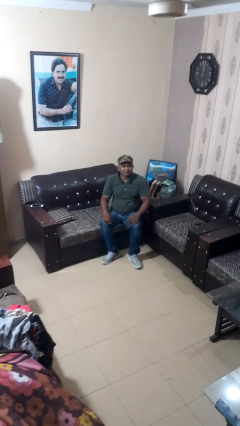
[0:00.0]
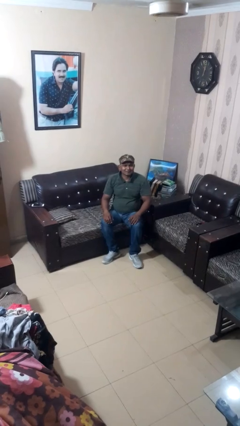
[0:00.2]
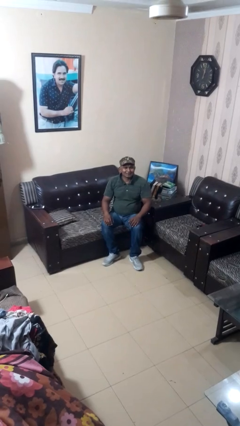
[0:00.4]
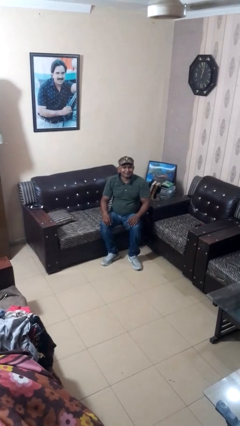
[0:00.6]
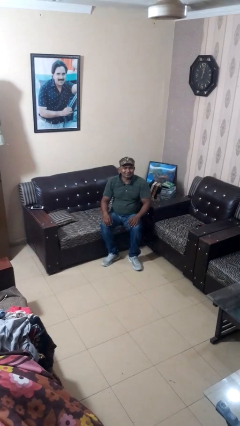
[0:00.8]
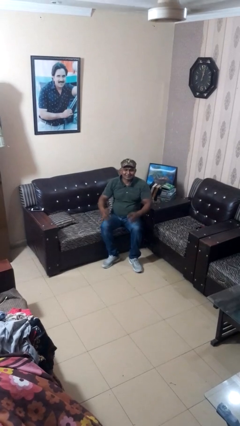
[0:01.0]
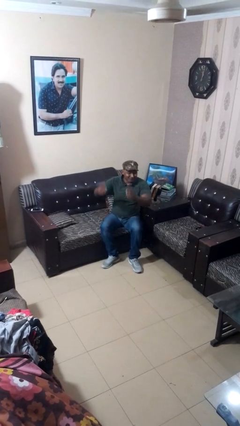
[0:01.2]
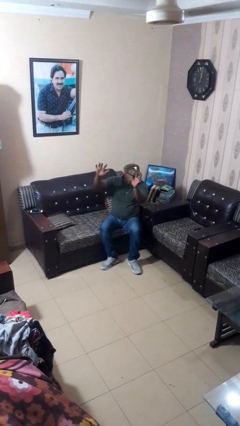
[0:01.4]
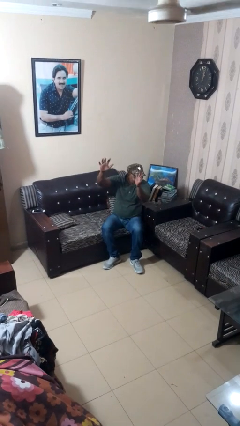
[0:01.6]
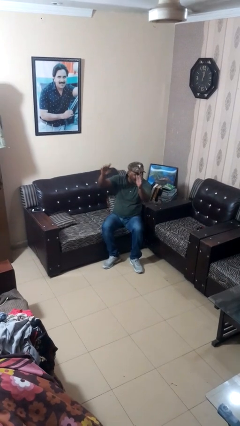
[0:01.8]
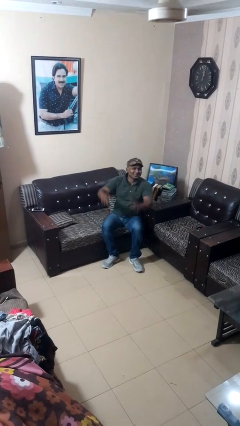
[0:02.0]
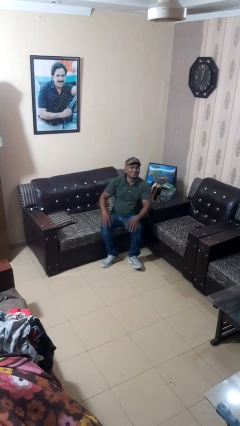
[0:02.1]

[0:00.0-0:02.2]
person shrugs

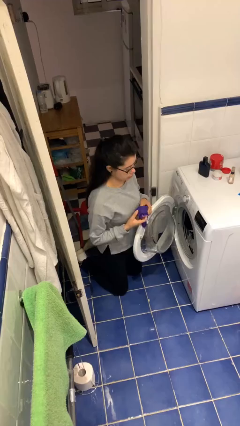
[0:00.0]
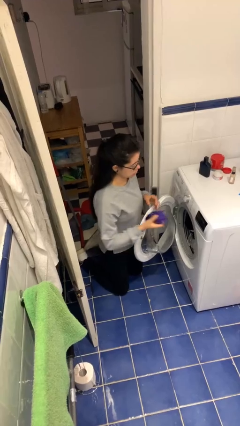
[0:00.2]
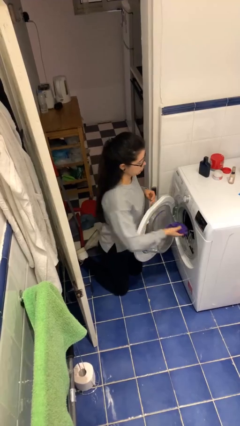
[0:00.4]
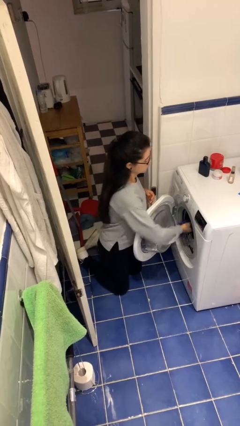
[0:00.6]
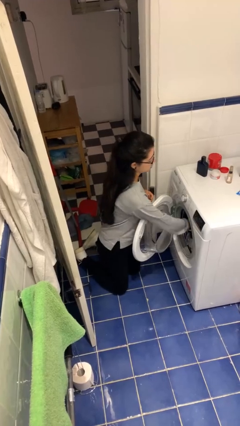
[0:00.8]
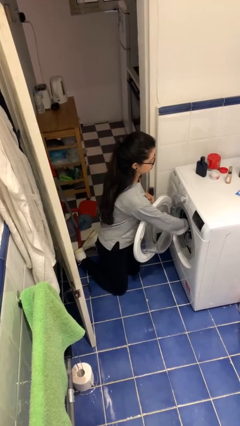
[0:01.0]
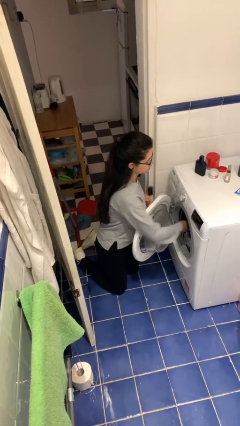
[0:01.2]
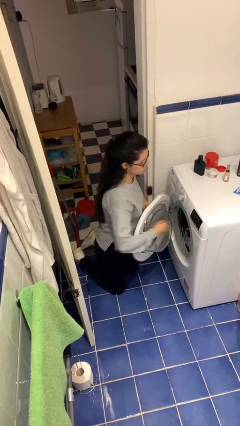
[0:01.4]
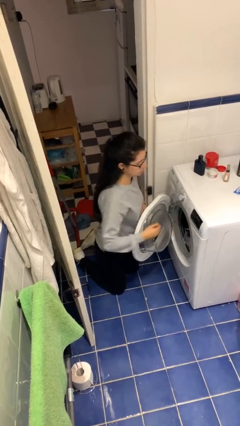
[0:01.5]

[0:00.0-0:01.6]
person loads clotheswasher

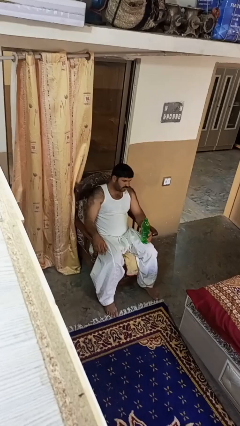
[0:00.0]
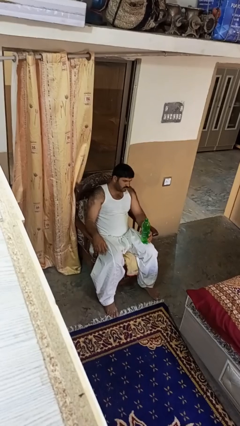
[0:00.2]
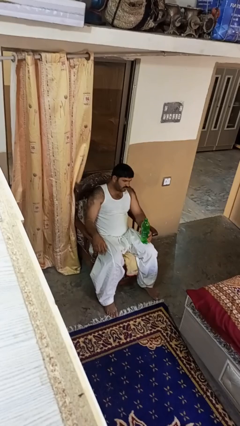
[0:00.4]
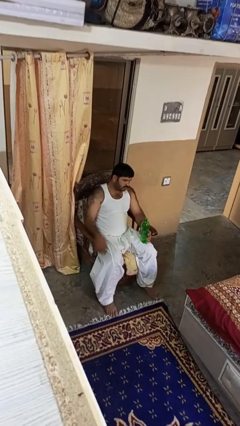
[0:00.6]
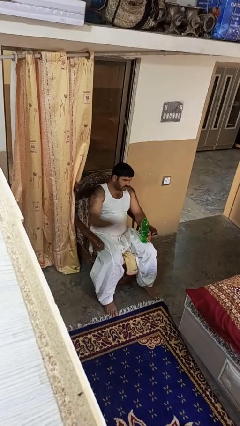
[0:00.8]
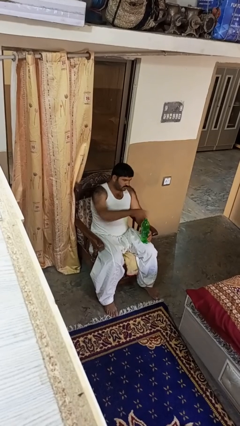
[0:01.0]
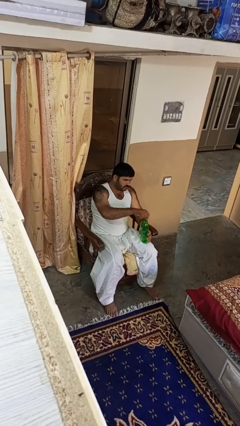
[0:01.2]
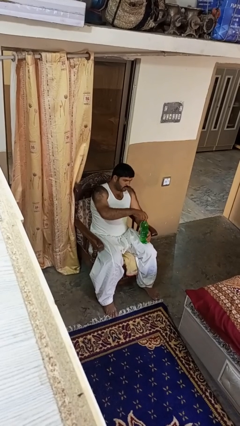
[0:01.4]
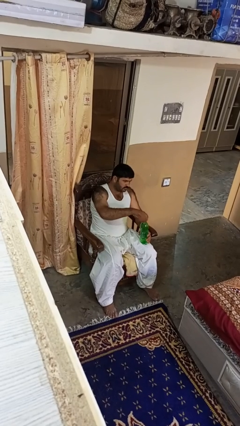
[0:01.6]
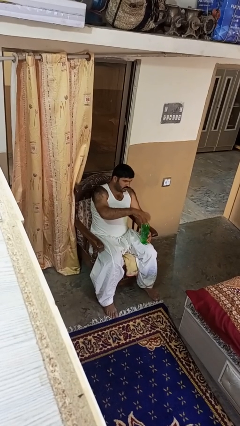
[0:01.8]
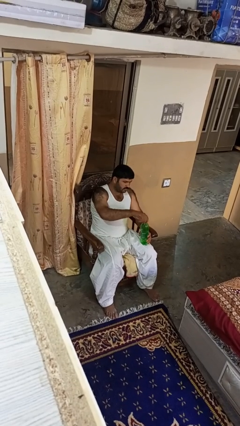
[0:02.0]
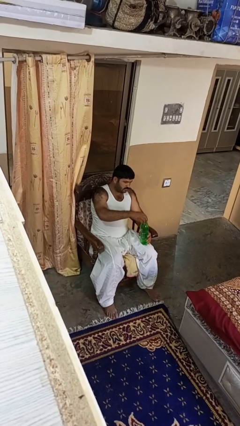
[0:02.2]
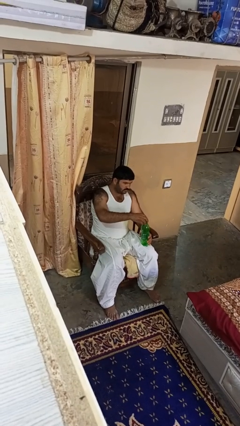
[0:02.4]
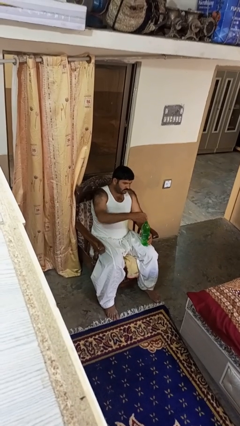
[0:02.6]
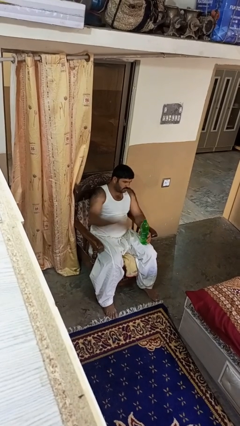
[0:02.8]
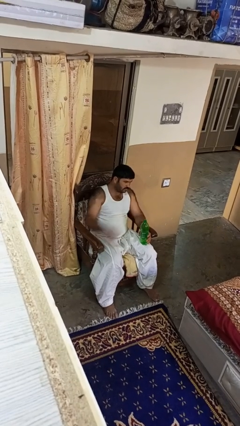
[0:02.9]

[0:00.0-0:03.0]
person unscrews lid from bottle

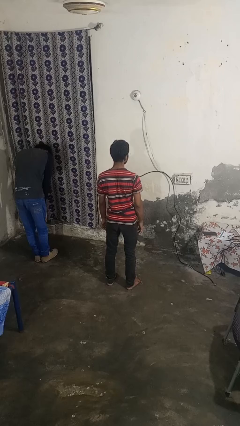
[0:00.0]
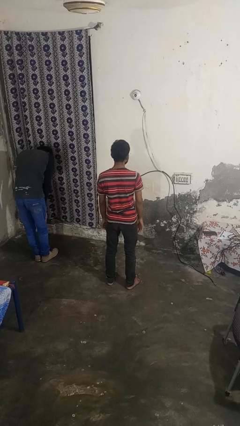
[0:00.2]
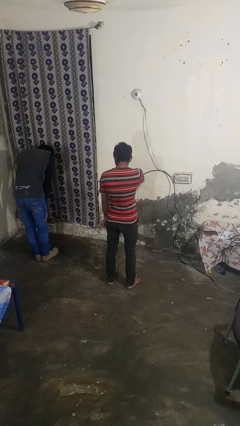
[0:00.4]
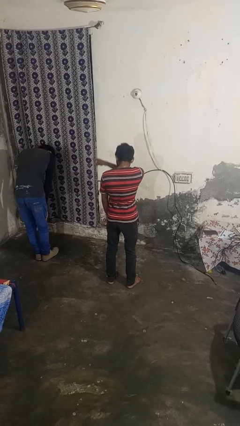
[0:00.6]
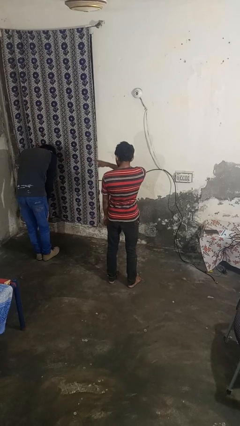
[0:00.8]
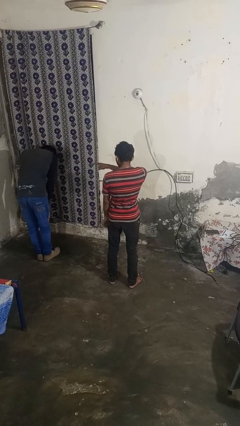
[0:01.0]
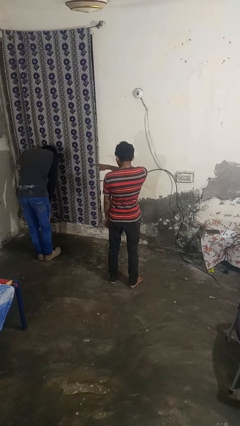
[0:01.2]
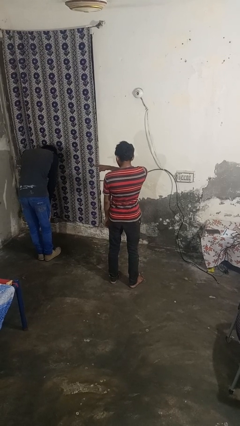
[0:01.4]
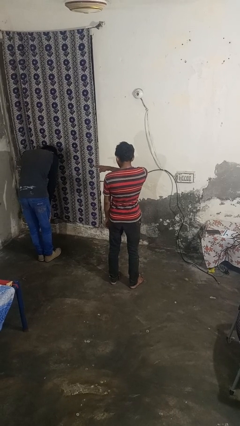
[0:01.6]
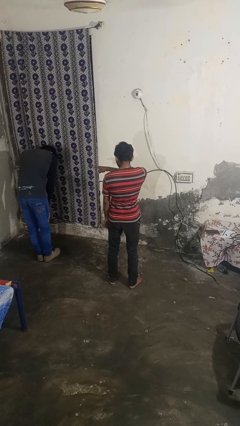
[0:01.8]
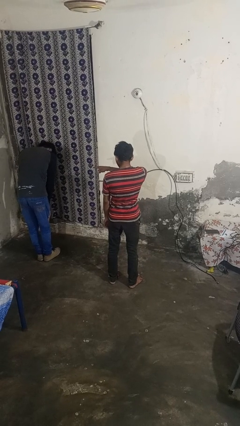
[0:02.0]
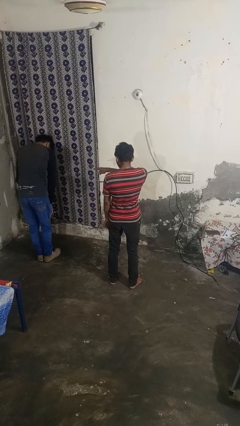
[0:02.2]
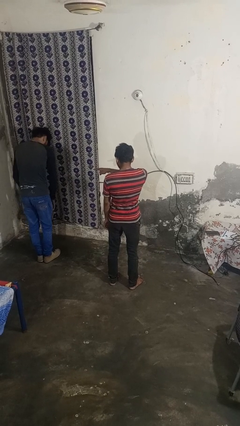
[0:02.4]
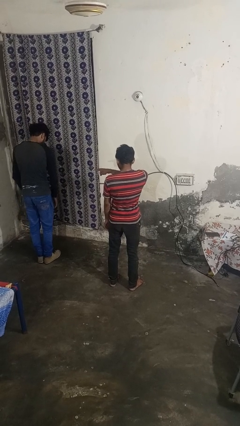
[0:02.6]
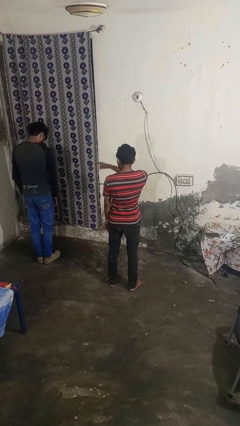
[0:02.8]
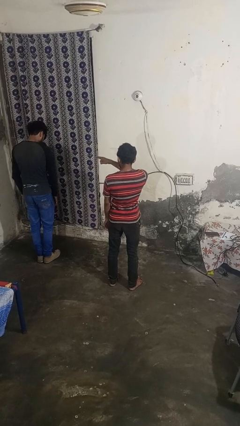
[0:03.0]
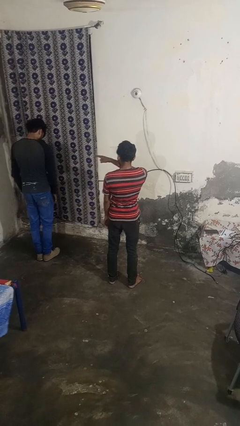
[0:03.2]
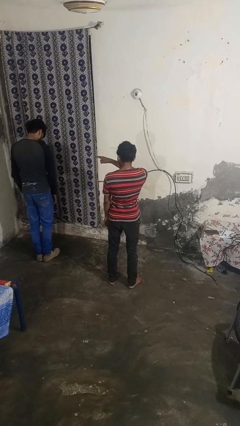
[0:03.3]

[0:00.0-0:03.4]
person points at person

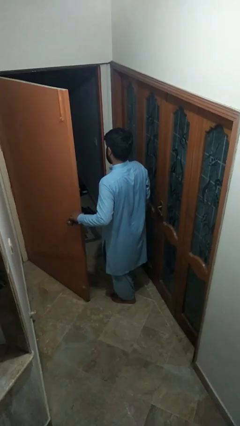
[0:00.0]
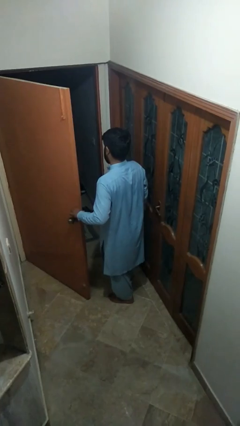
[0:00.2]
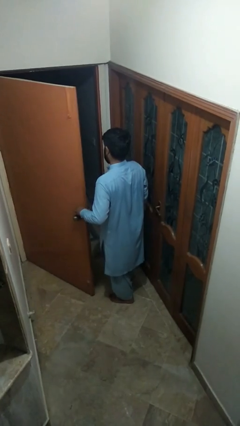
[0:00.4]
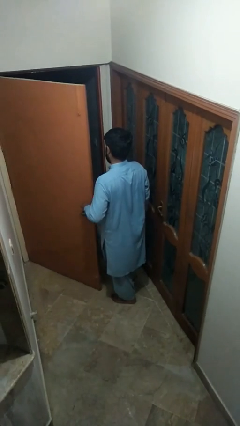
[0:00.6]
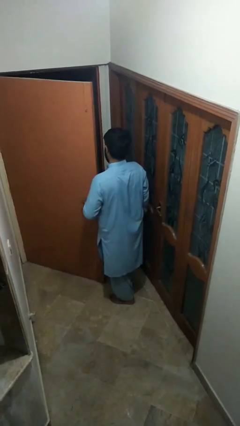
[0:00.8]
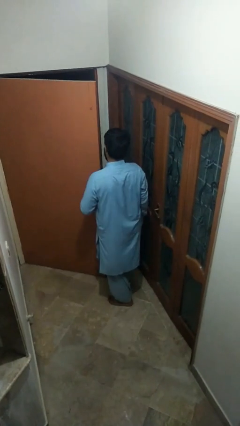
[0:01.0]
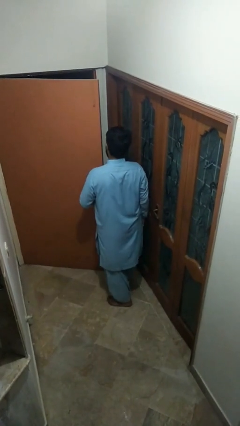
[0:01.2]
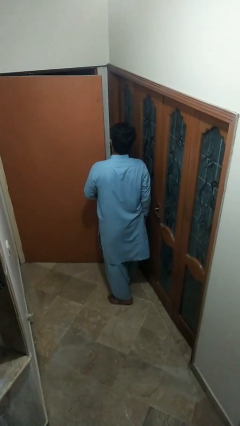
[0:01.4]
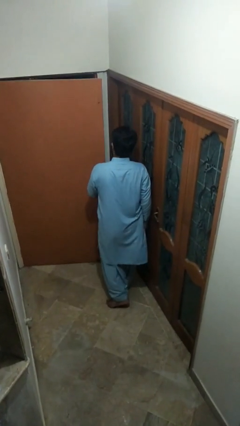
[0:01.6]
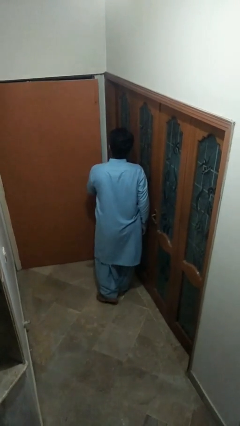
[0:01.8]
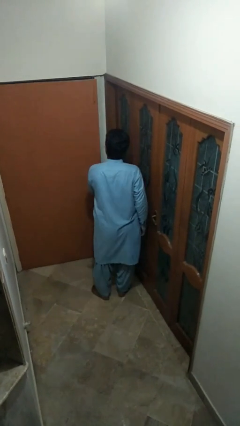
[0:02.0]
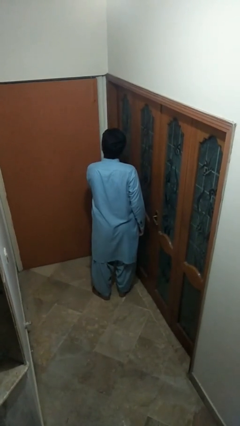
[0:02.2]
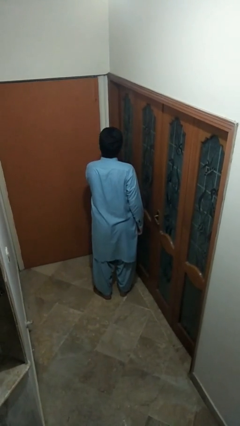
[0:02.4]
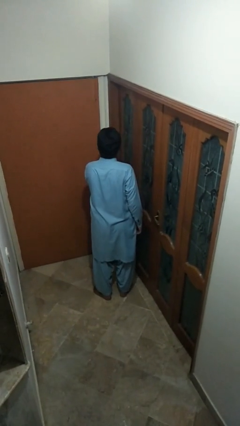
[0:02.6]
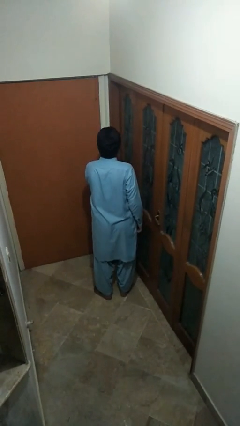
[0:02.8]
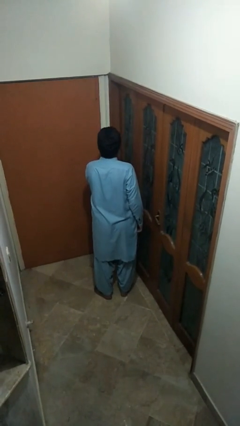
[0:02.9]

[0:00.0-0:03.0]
person closes facility door

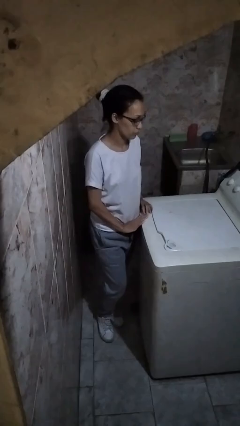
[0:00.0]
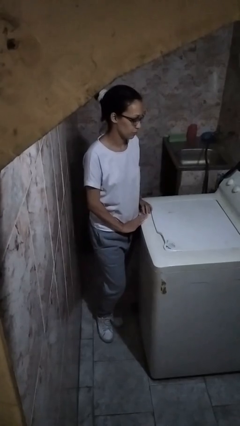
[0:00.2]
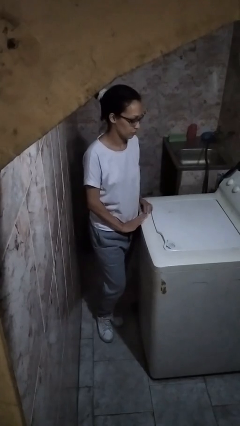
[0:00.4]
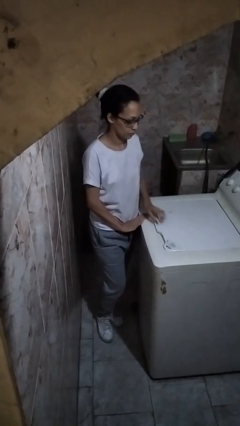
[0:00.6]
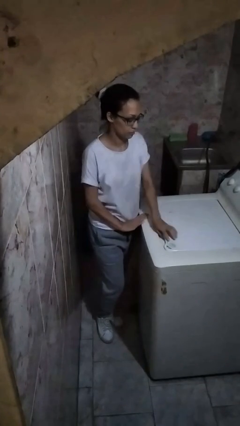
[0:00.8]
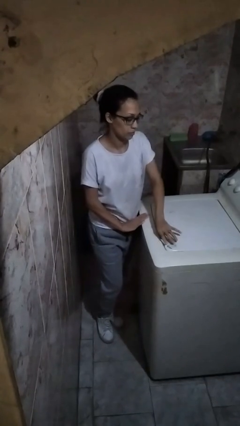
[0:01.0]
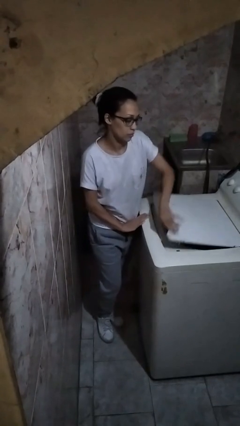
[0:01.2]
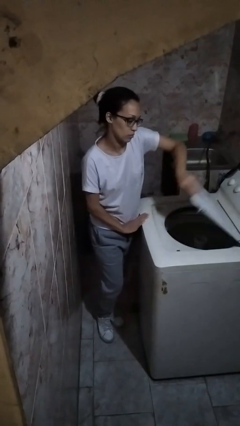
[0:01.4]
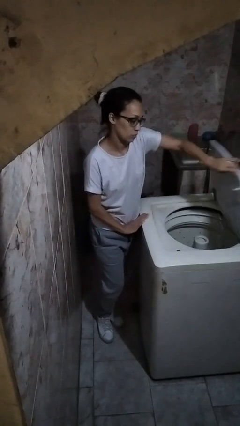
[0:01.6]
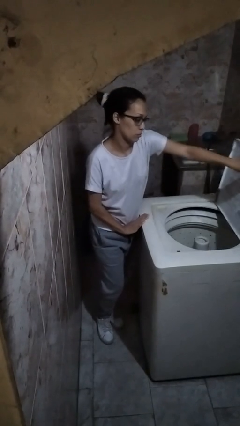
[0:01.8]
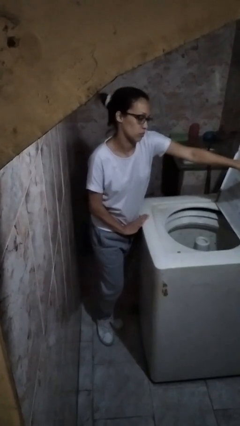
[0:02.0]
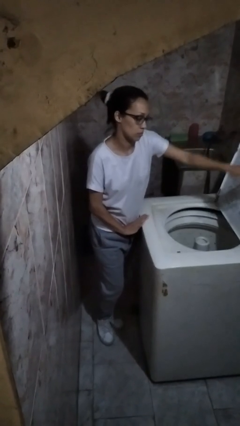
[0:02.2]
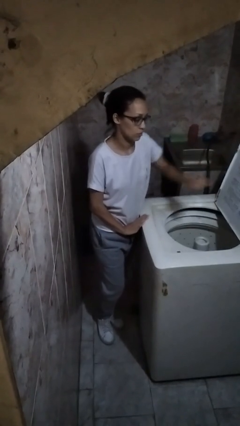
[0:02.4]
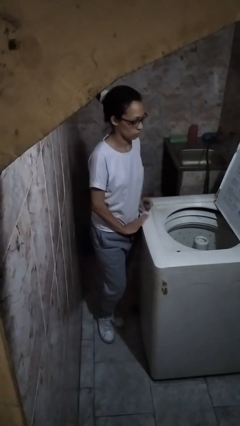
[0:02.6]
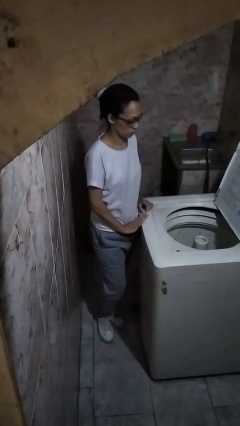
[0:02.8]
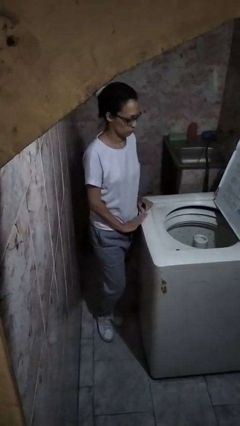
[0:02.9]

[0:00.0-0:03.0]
person opens clothes washer

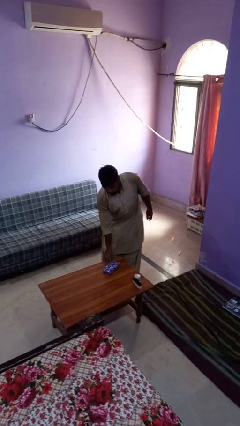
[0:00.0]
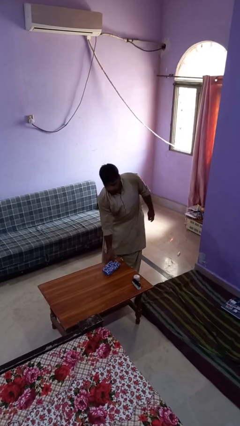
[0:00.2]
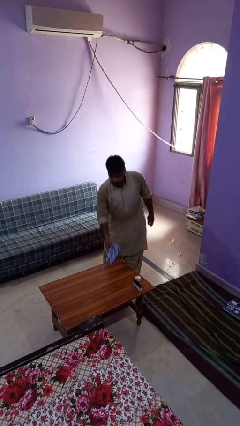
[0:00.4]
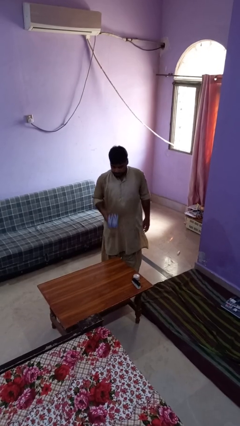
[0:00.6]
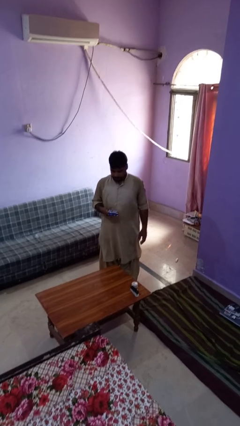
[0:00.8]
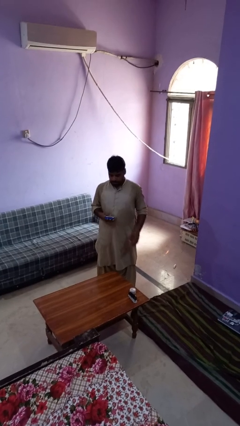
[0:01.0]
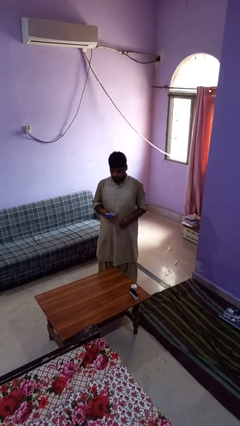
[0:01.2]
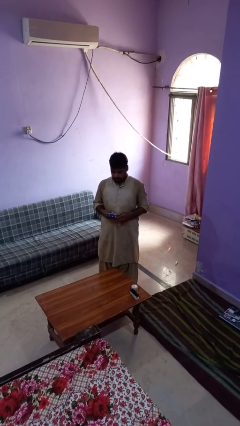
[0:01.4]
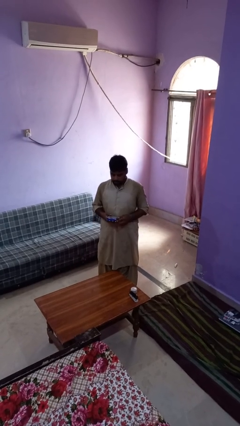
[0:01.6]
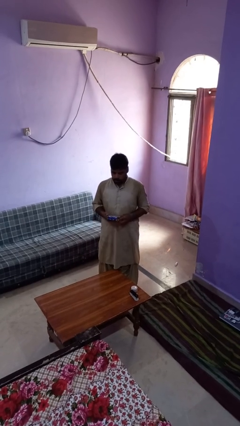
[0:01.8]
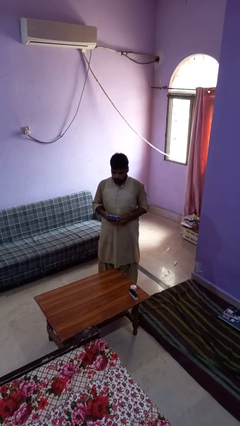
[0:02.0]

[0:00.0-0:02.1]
person picks up object from table
